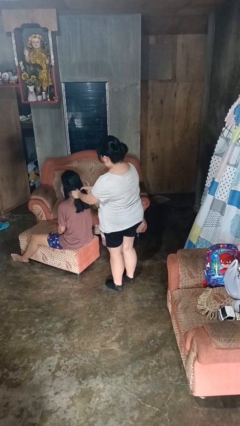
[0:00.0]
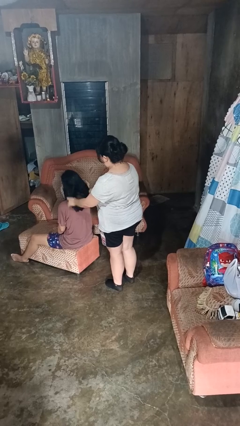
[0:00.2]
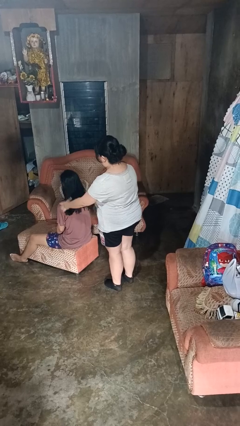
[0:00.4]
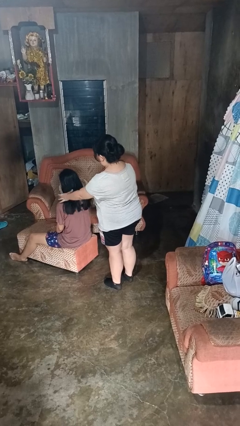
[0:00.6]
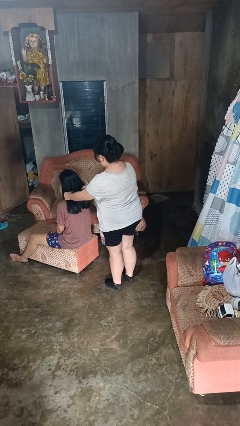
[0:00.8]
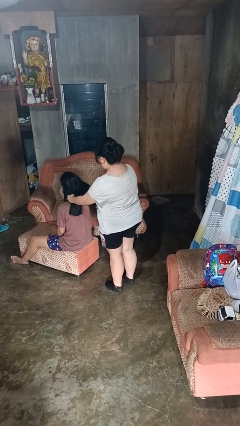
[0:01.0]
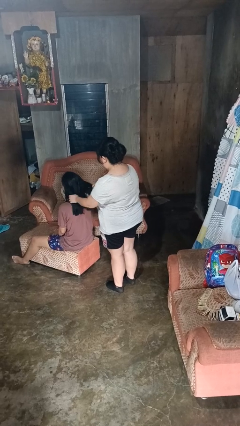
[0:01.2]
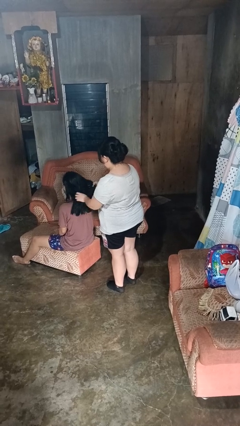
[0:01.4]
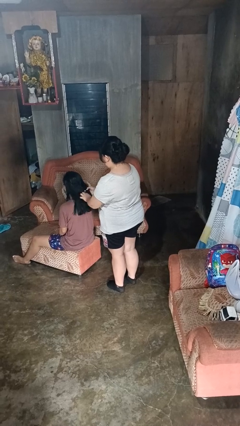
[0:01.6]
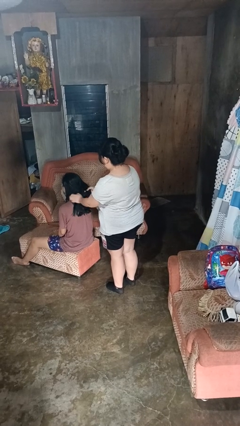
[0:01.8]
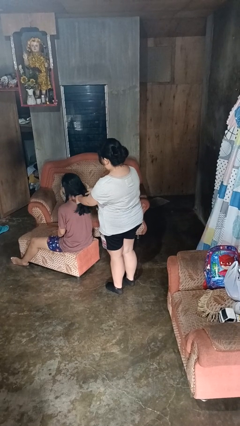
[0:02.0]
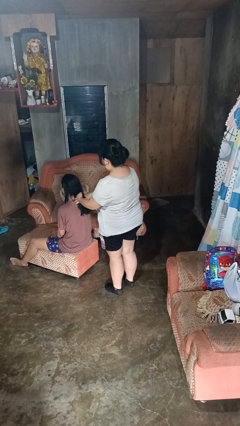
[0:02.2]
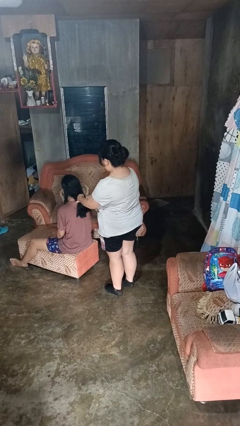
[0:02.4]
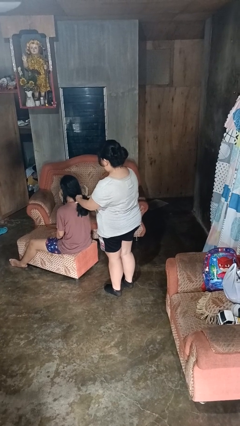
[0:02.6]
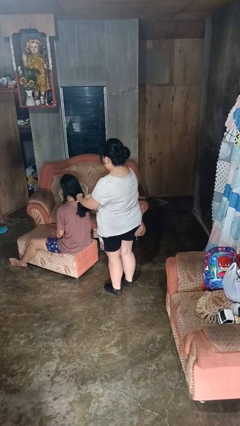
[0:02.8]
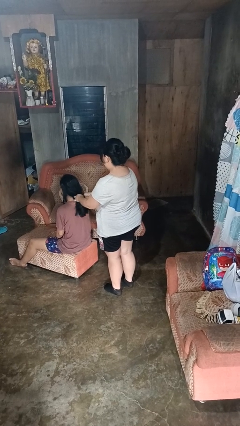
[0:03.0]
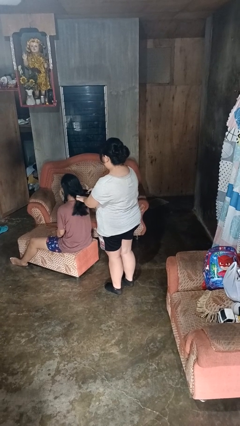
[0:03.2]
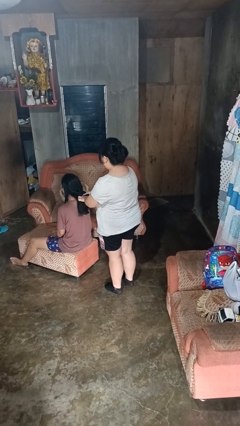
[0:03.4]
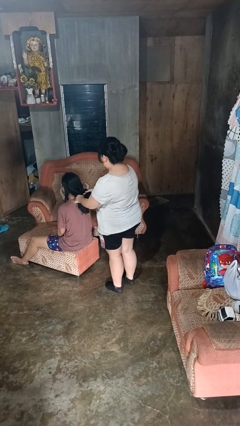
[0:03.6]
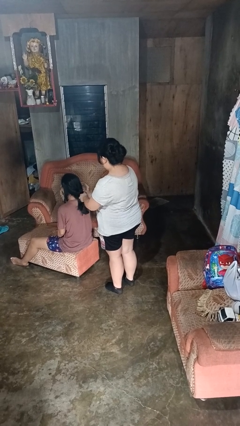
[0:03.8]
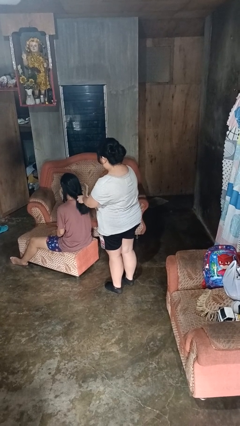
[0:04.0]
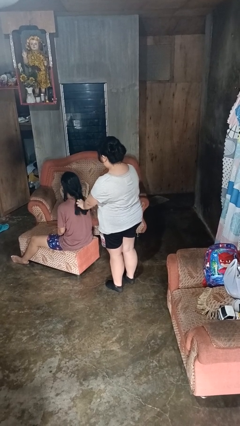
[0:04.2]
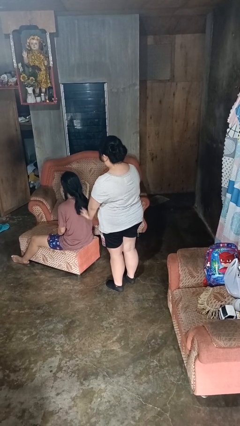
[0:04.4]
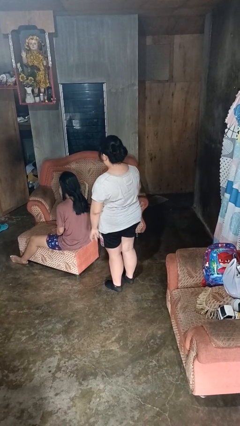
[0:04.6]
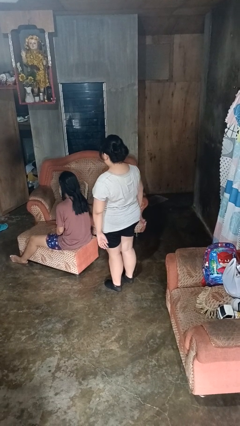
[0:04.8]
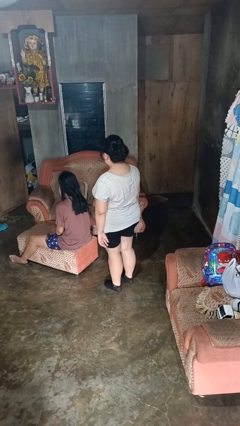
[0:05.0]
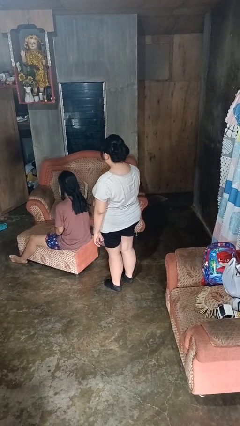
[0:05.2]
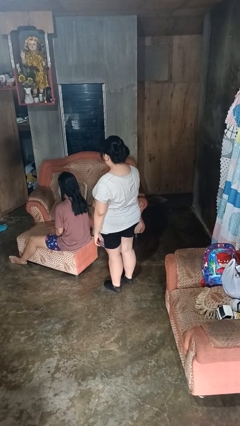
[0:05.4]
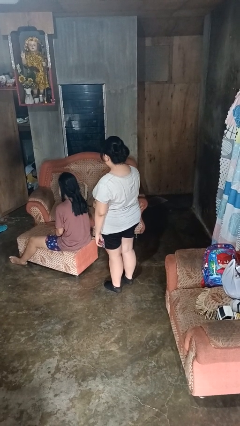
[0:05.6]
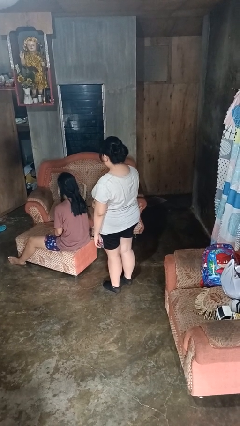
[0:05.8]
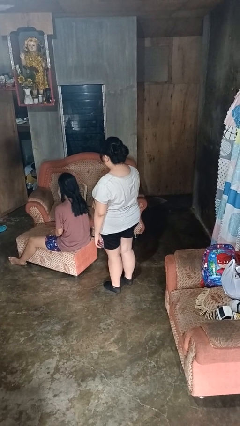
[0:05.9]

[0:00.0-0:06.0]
person braids hair of person

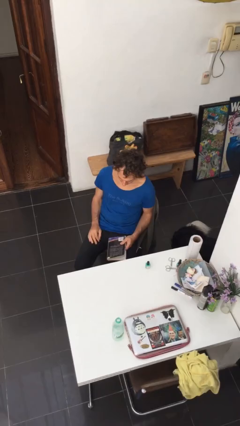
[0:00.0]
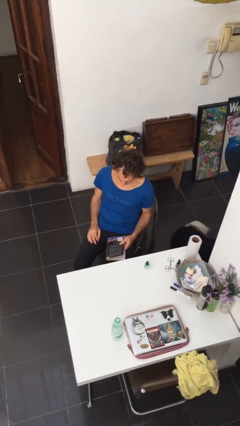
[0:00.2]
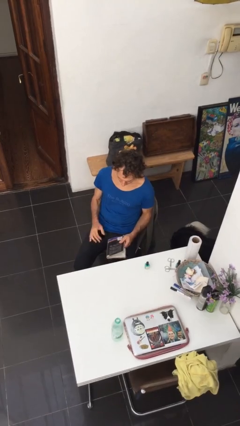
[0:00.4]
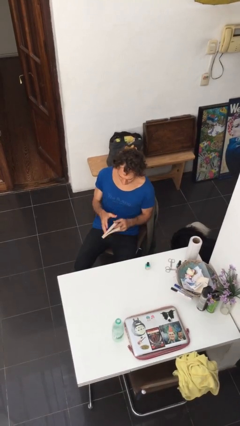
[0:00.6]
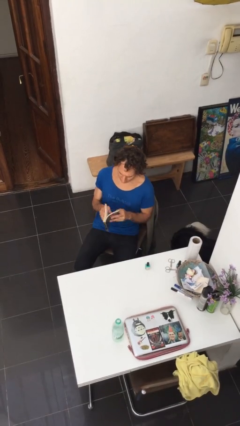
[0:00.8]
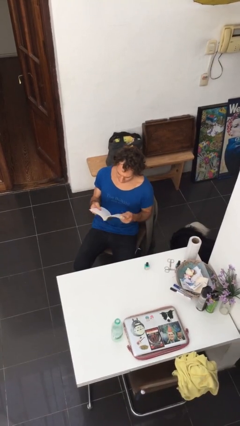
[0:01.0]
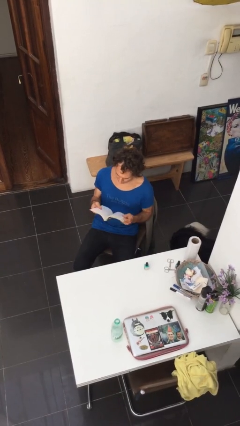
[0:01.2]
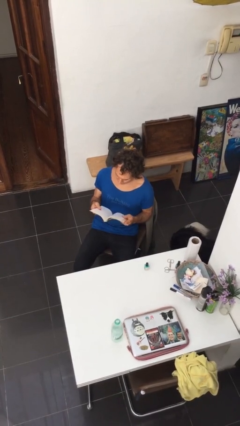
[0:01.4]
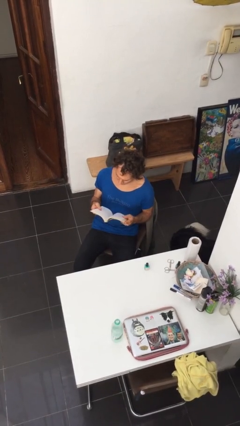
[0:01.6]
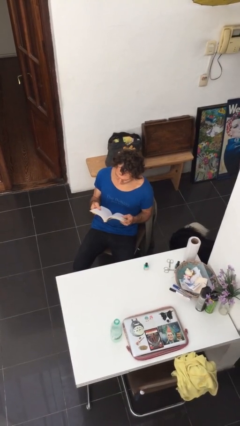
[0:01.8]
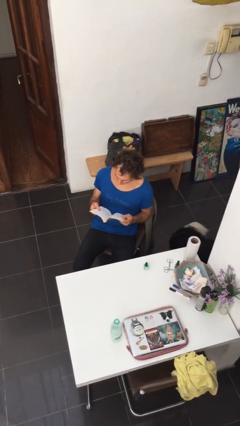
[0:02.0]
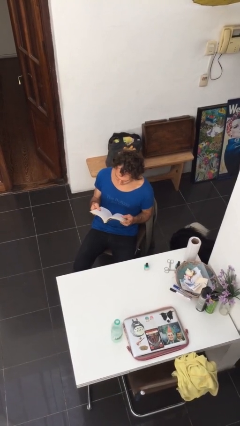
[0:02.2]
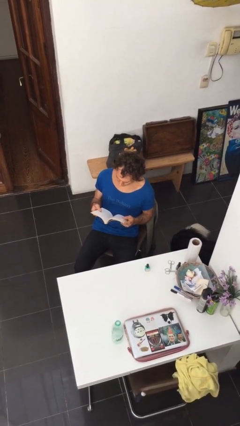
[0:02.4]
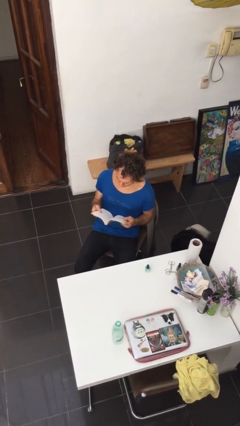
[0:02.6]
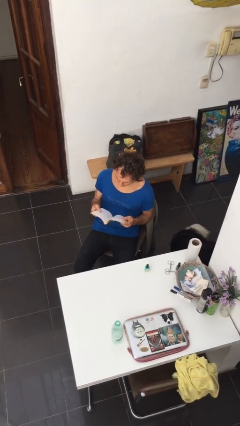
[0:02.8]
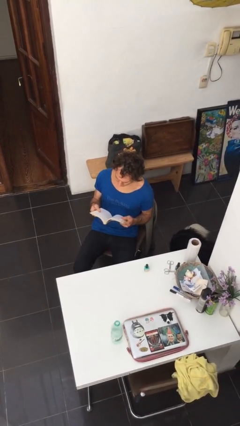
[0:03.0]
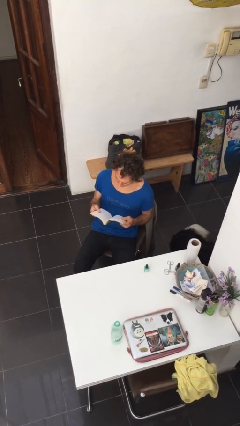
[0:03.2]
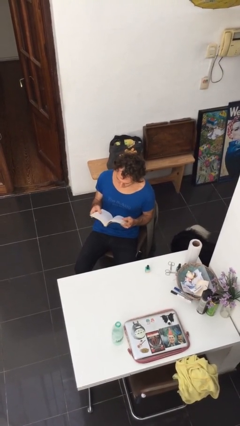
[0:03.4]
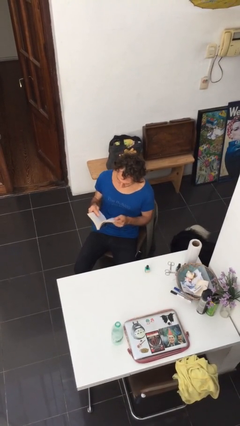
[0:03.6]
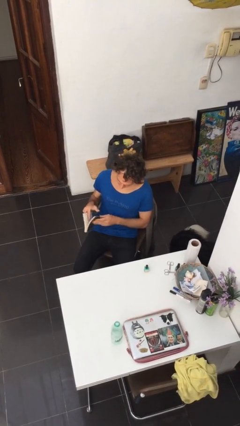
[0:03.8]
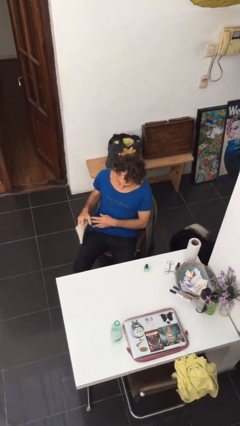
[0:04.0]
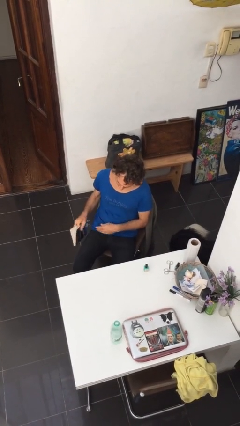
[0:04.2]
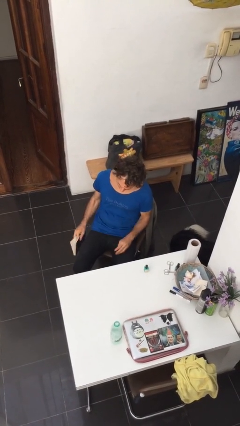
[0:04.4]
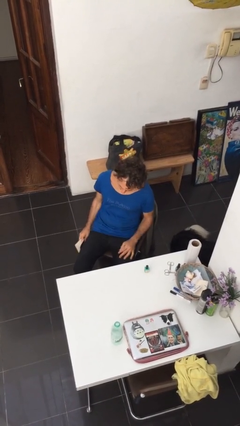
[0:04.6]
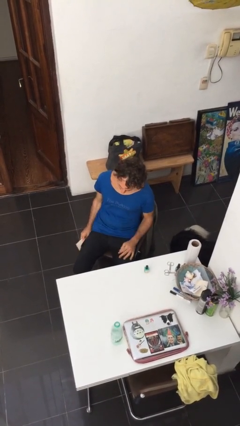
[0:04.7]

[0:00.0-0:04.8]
person reads document

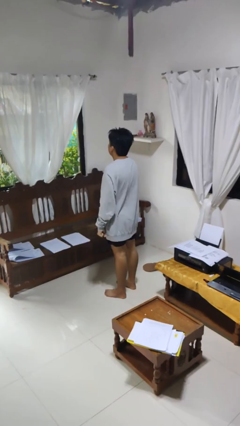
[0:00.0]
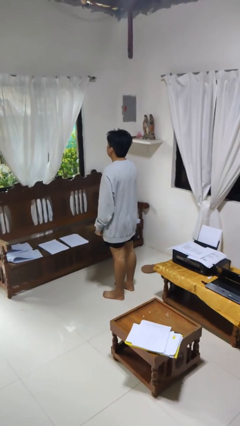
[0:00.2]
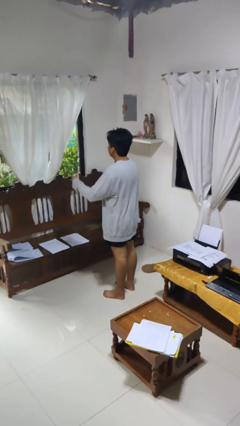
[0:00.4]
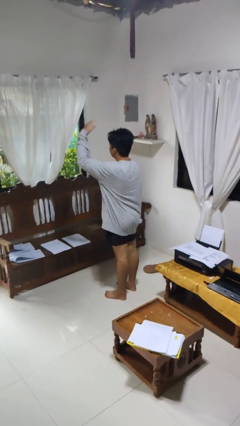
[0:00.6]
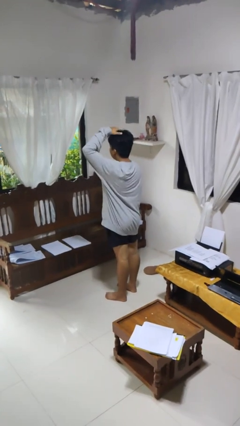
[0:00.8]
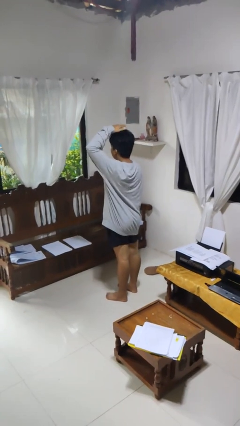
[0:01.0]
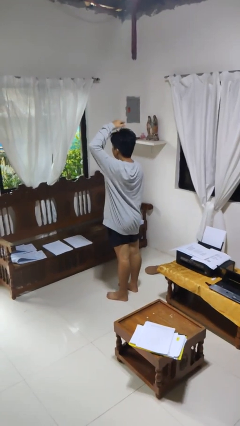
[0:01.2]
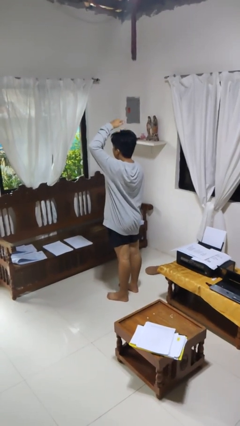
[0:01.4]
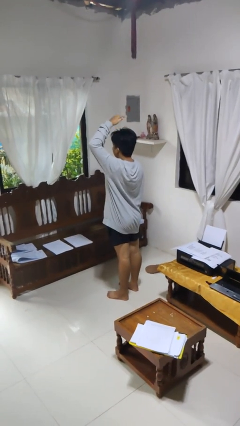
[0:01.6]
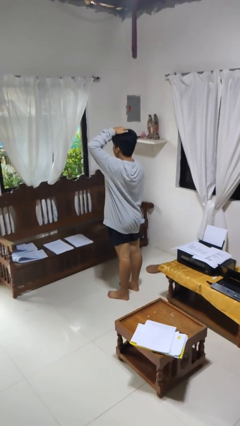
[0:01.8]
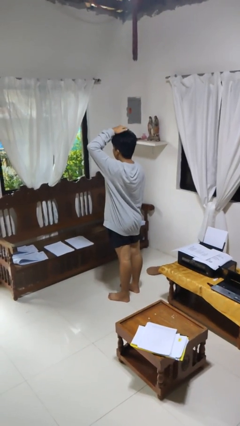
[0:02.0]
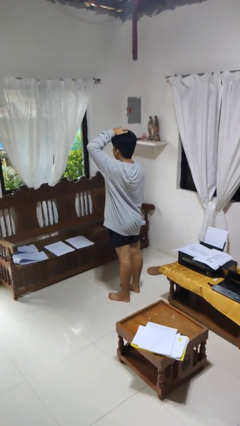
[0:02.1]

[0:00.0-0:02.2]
person pats head

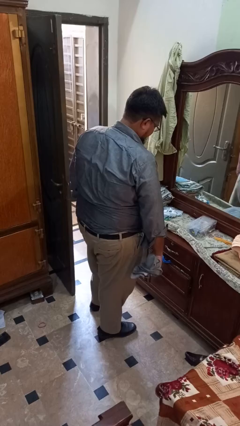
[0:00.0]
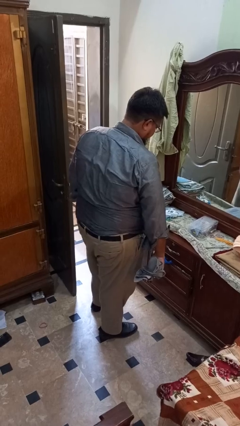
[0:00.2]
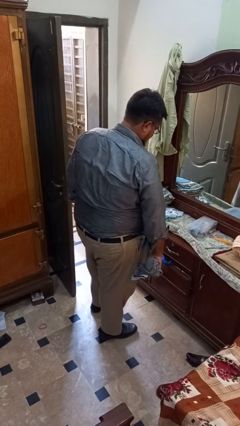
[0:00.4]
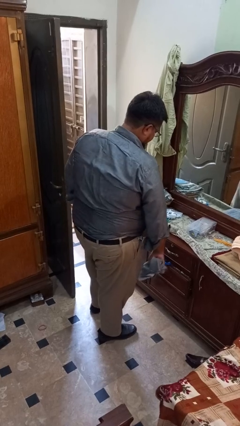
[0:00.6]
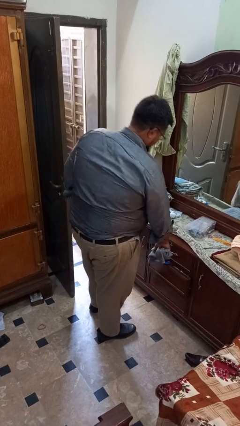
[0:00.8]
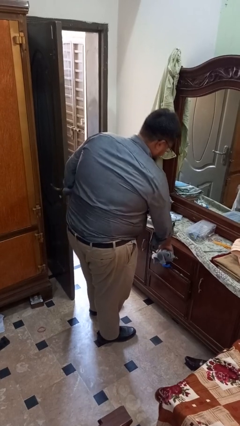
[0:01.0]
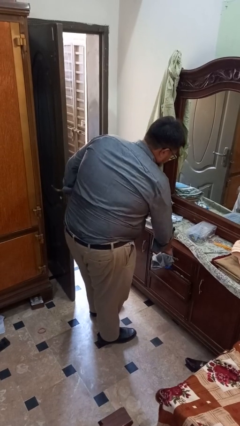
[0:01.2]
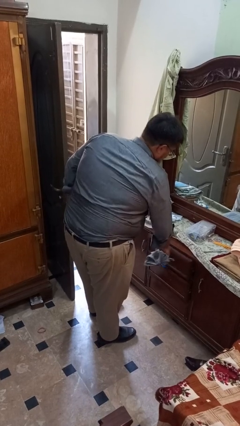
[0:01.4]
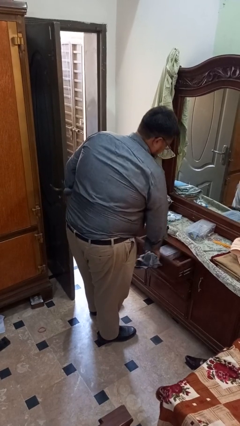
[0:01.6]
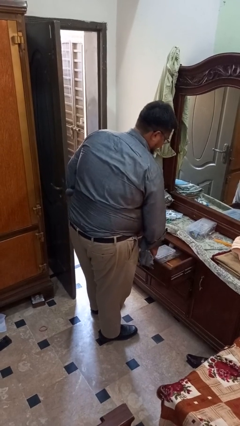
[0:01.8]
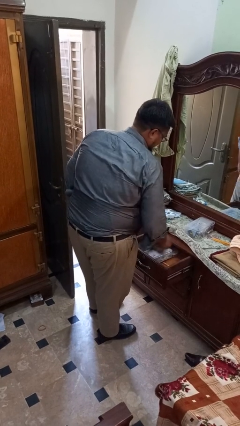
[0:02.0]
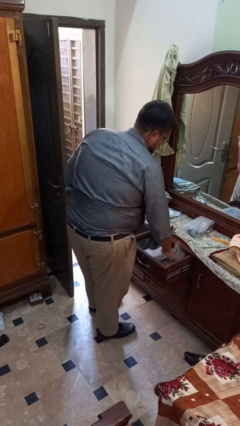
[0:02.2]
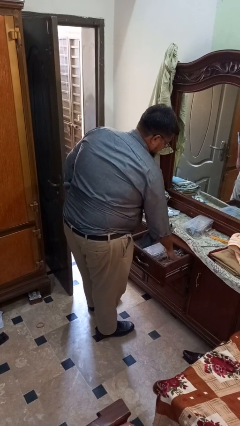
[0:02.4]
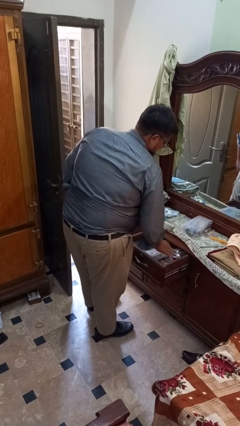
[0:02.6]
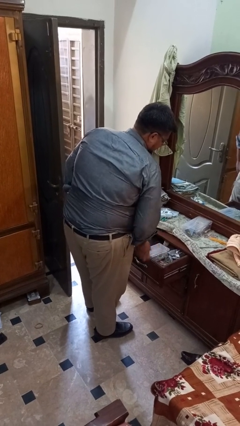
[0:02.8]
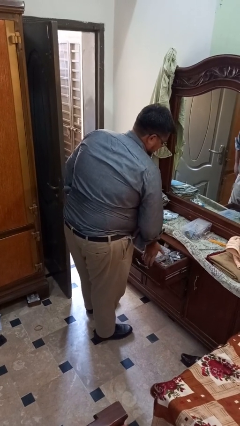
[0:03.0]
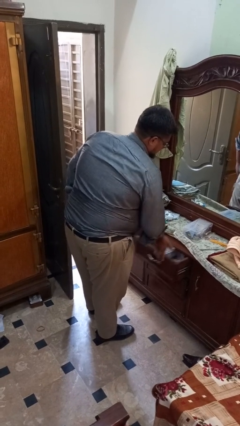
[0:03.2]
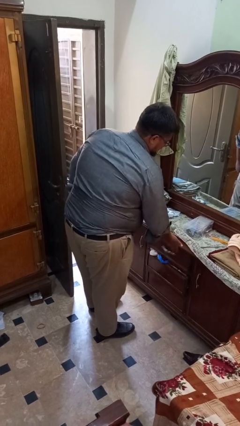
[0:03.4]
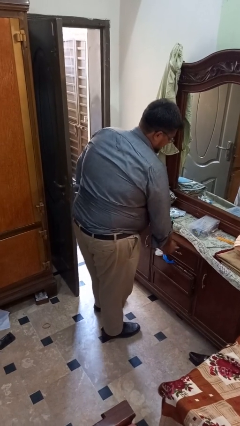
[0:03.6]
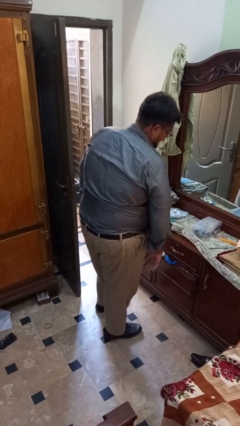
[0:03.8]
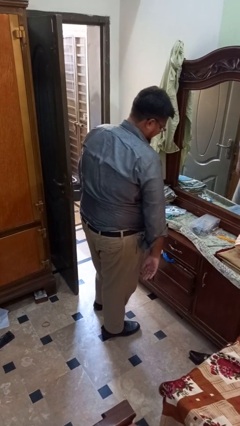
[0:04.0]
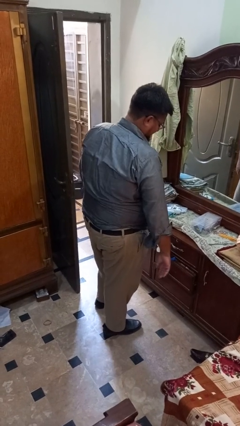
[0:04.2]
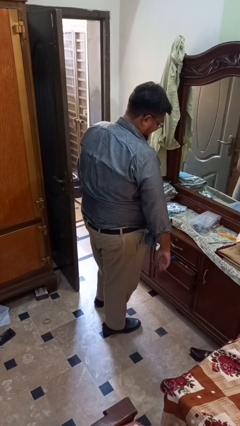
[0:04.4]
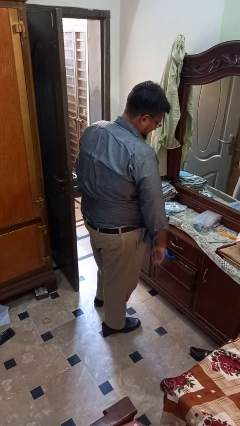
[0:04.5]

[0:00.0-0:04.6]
person puts clothes into dresser

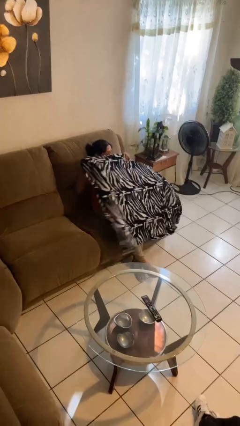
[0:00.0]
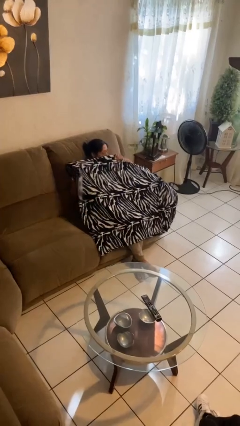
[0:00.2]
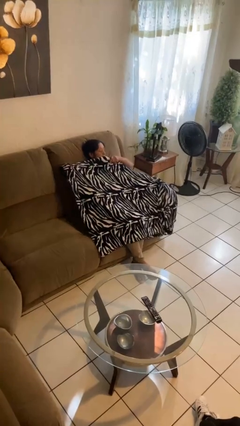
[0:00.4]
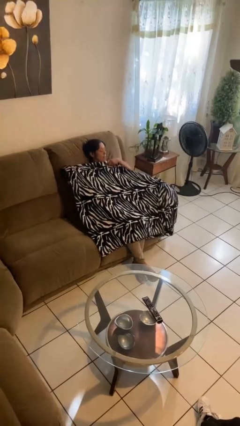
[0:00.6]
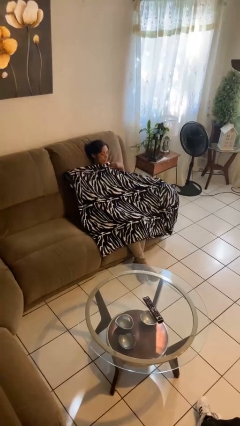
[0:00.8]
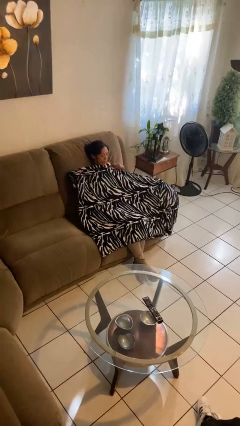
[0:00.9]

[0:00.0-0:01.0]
person covers with blanket
